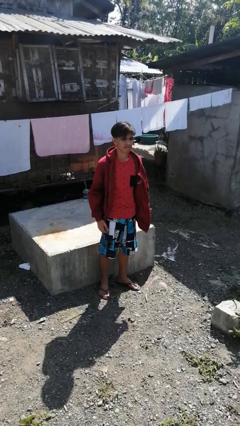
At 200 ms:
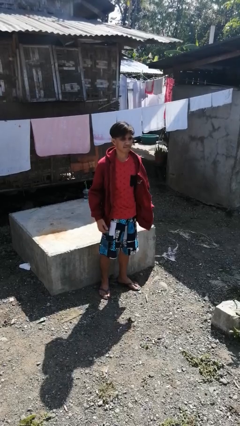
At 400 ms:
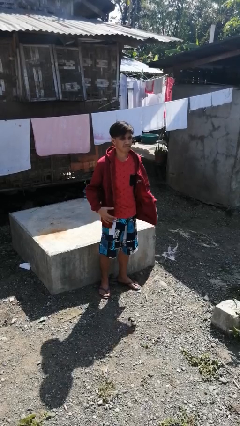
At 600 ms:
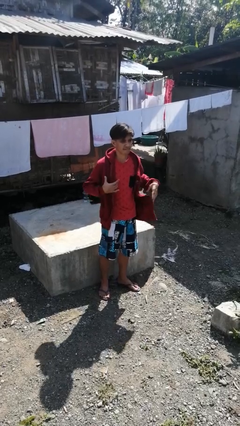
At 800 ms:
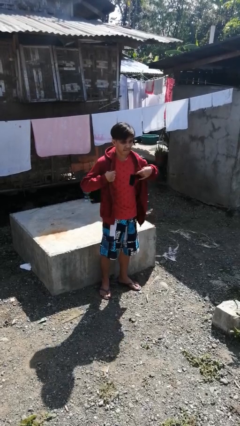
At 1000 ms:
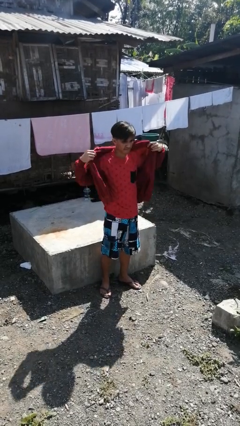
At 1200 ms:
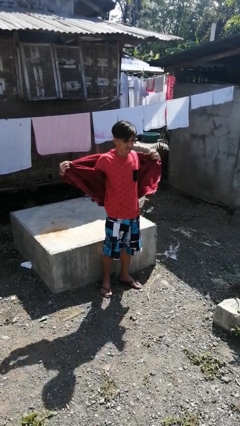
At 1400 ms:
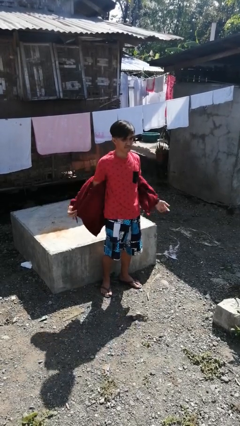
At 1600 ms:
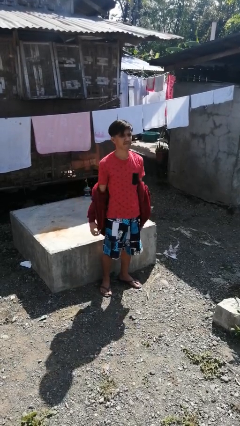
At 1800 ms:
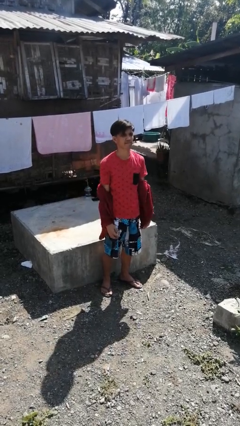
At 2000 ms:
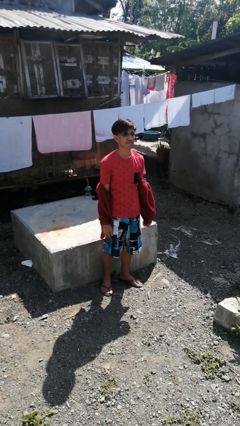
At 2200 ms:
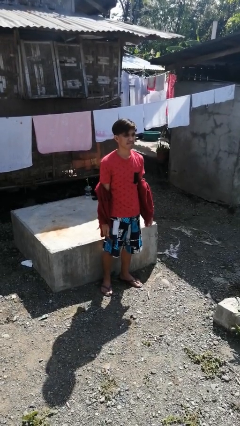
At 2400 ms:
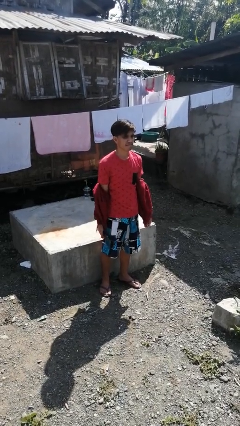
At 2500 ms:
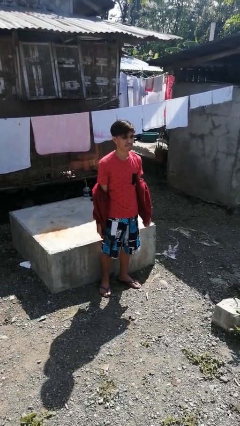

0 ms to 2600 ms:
person takes off jacket

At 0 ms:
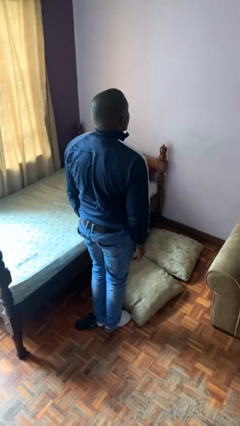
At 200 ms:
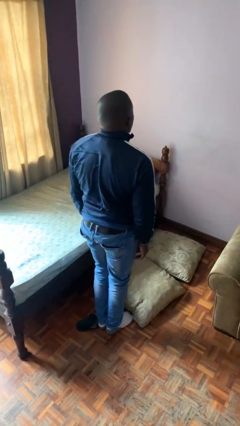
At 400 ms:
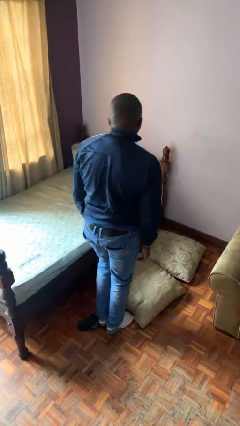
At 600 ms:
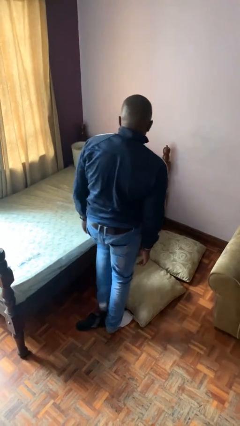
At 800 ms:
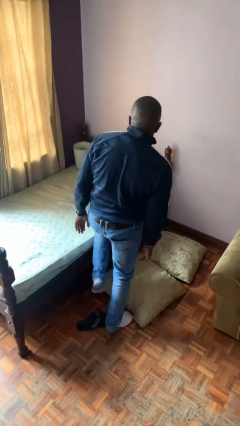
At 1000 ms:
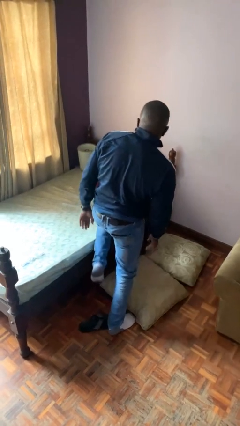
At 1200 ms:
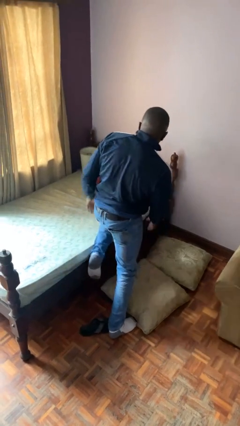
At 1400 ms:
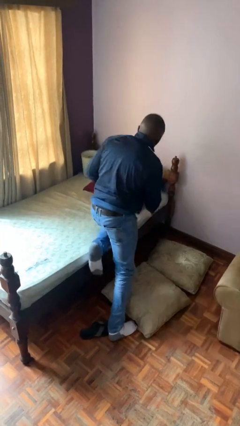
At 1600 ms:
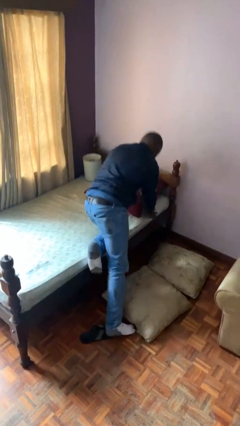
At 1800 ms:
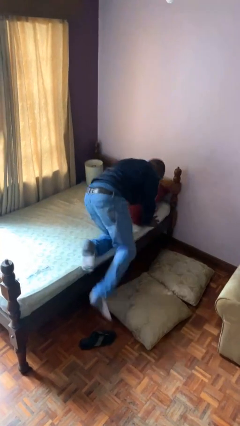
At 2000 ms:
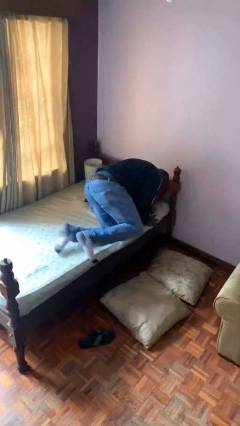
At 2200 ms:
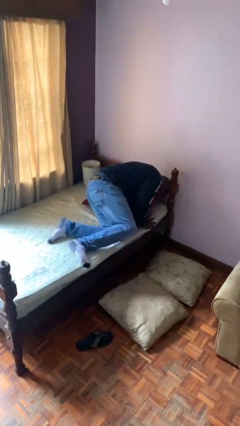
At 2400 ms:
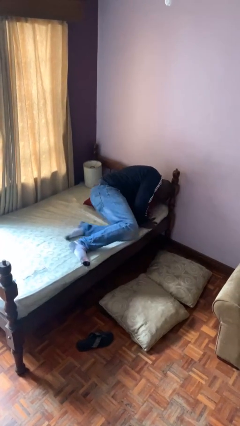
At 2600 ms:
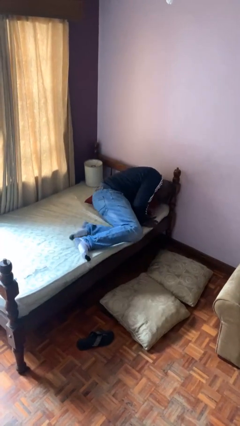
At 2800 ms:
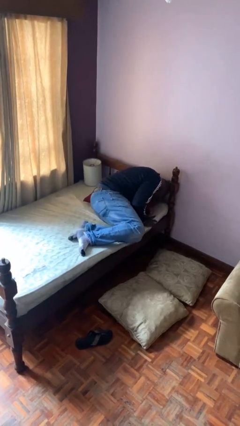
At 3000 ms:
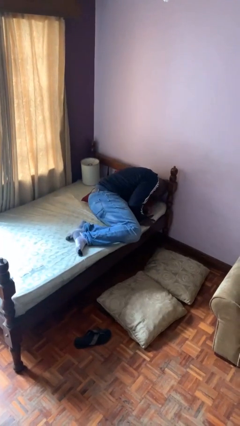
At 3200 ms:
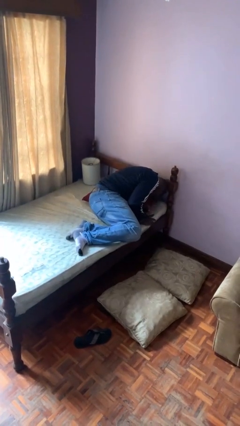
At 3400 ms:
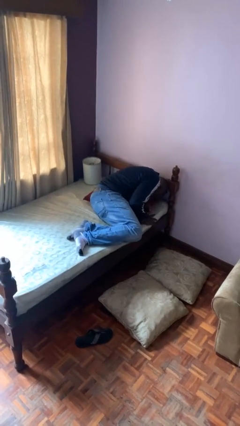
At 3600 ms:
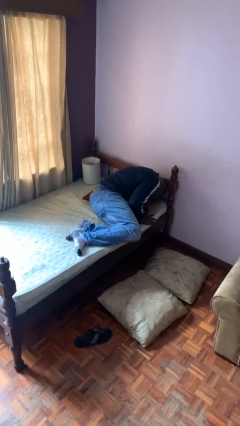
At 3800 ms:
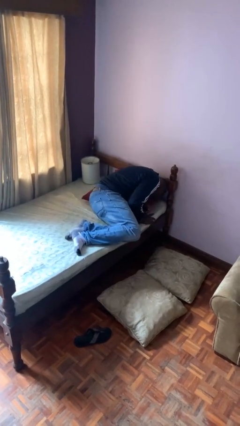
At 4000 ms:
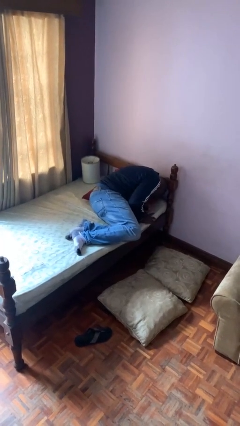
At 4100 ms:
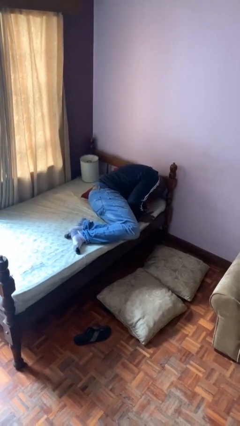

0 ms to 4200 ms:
person lies down on bed

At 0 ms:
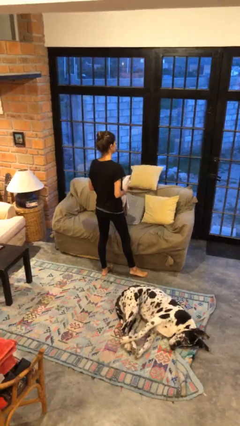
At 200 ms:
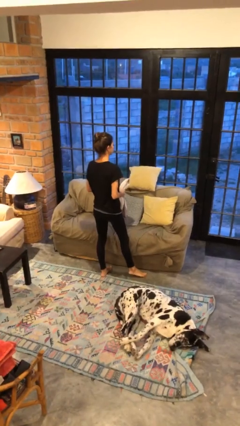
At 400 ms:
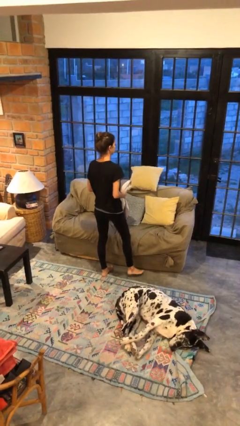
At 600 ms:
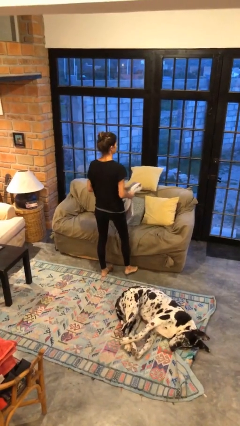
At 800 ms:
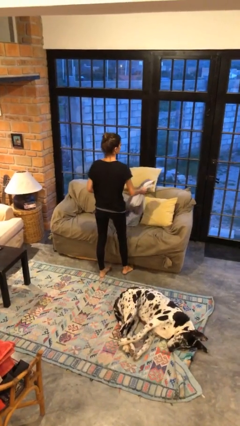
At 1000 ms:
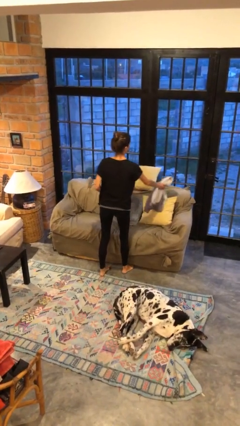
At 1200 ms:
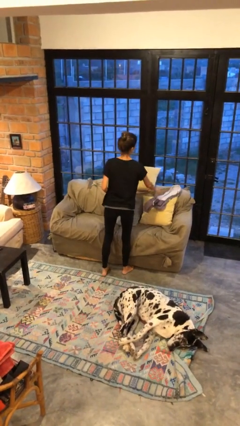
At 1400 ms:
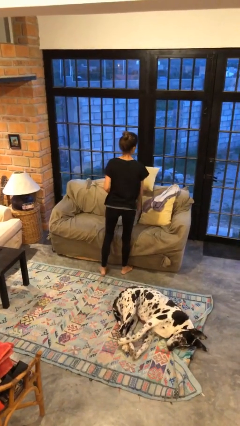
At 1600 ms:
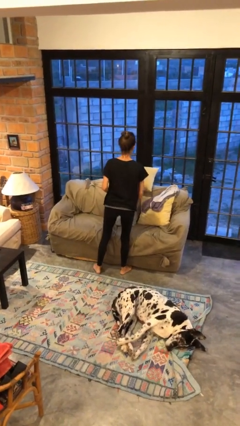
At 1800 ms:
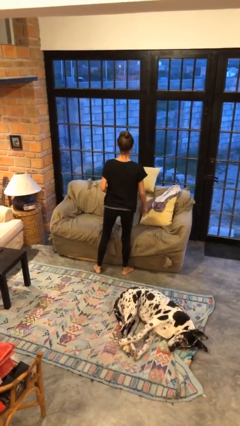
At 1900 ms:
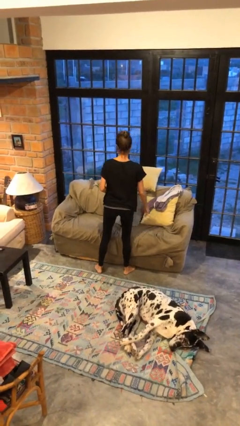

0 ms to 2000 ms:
person puts down object on couch

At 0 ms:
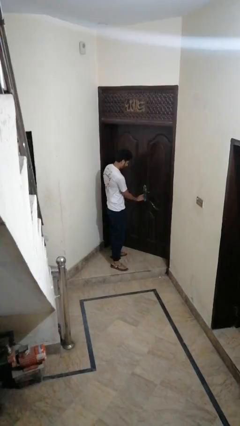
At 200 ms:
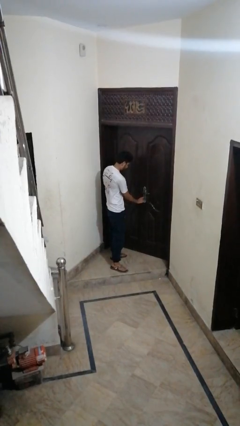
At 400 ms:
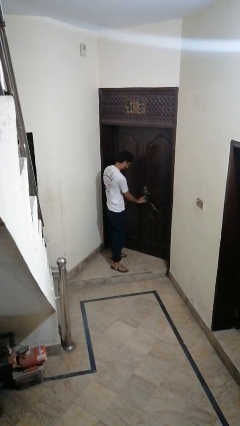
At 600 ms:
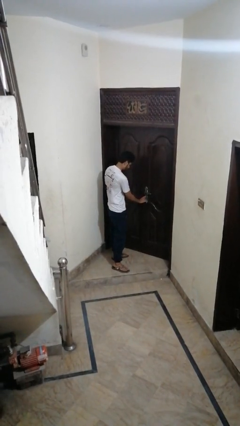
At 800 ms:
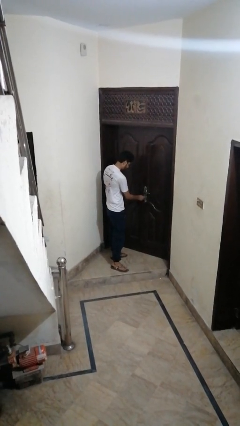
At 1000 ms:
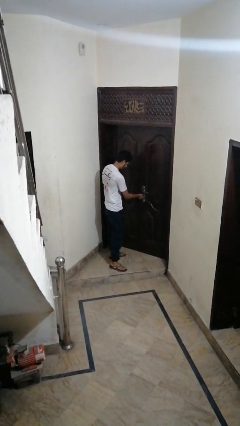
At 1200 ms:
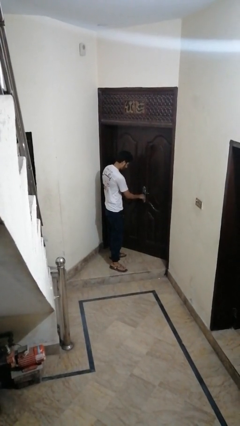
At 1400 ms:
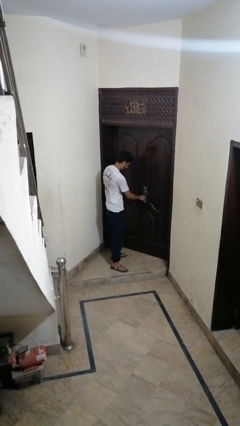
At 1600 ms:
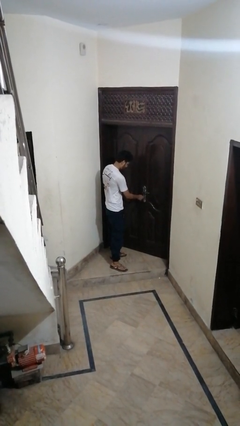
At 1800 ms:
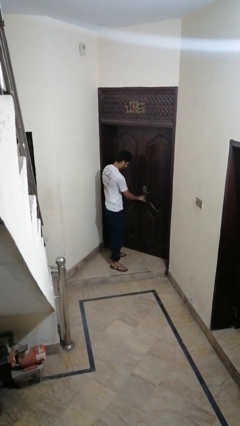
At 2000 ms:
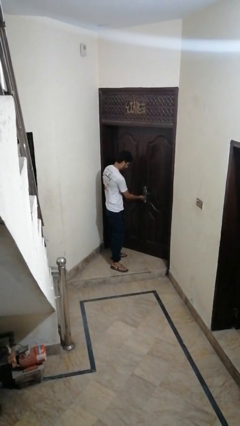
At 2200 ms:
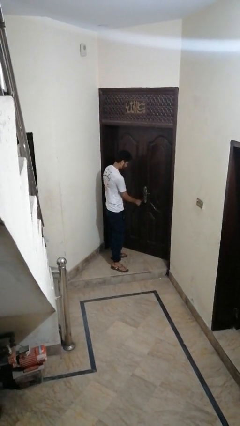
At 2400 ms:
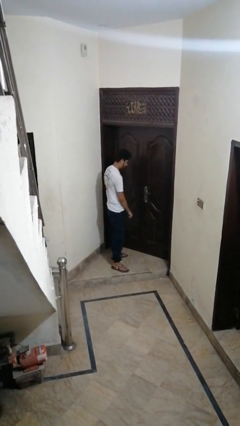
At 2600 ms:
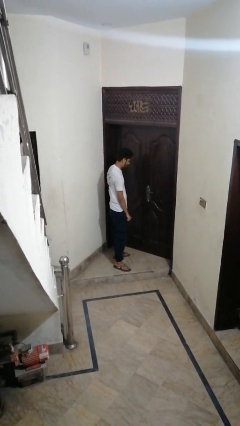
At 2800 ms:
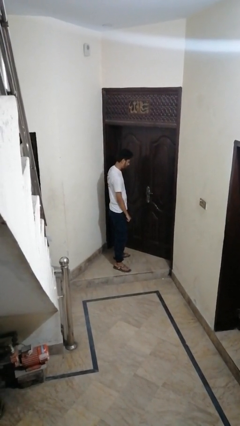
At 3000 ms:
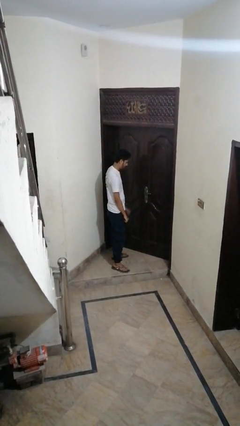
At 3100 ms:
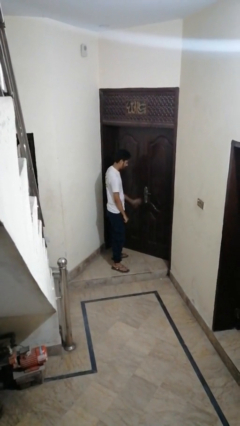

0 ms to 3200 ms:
person unlocks door with keys

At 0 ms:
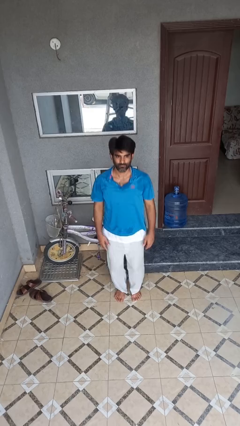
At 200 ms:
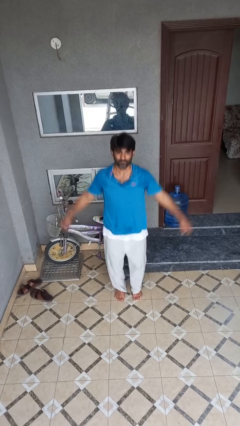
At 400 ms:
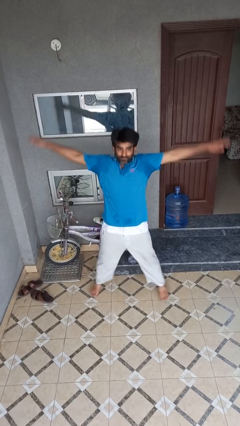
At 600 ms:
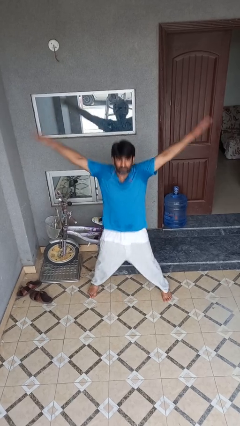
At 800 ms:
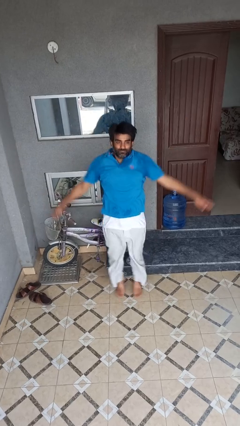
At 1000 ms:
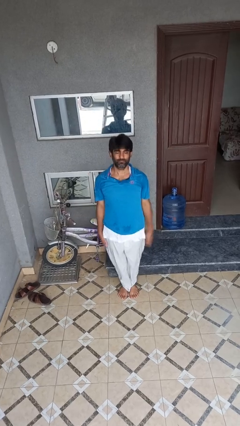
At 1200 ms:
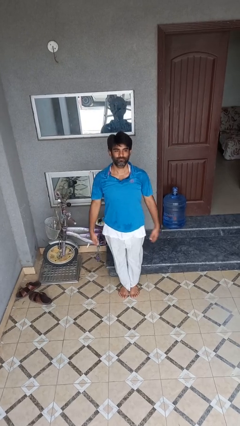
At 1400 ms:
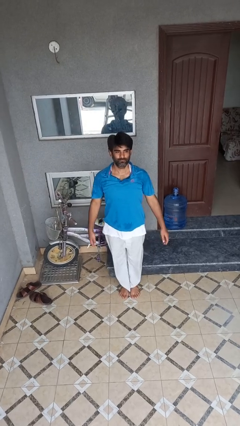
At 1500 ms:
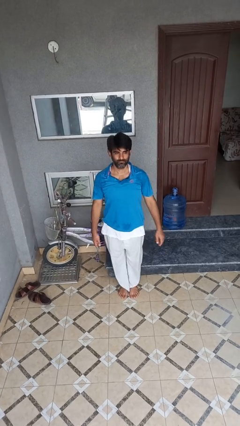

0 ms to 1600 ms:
person exercises with jumping jacks

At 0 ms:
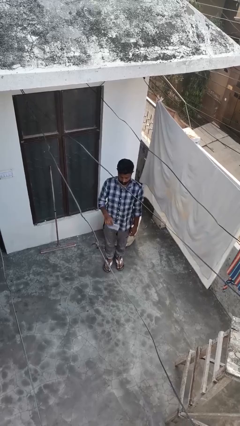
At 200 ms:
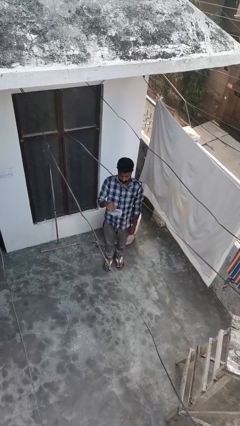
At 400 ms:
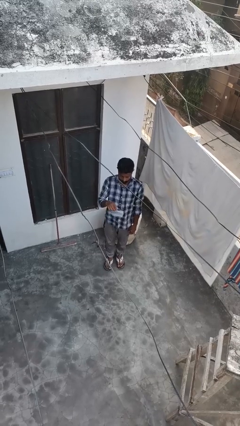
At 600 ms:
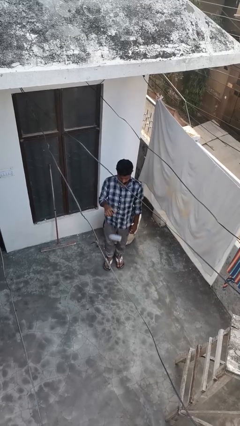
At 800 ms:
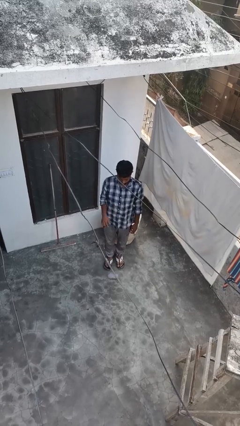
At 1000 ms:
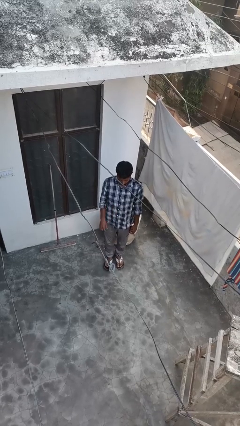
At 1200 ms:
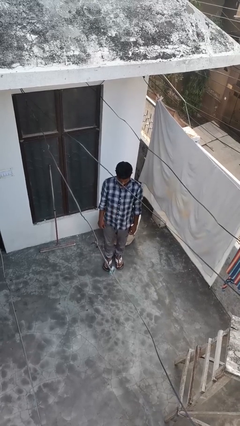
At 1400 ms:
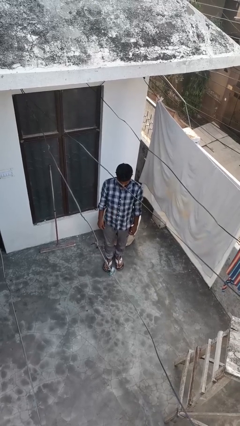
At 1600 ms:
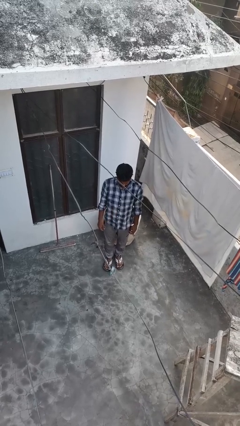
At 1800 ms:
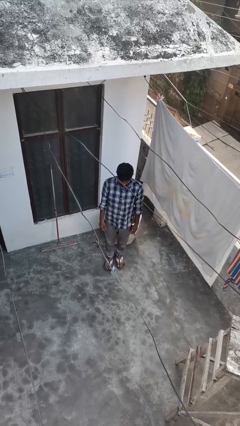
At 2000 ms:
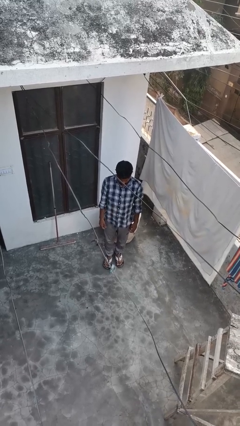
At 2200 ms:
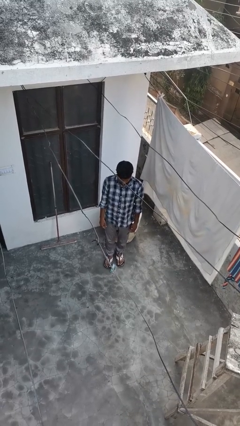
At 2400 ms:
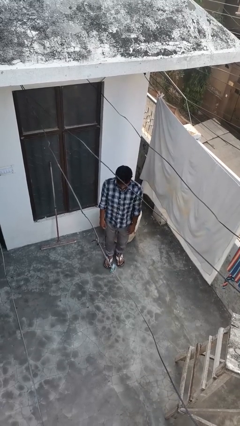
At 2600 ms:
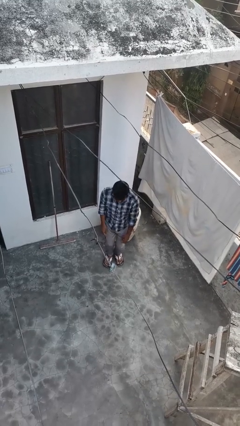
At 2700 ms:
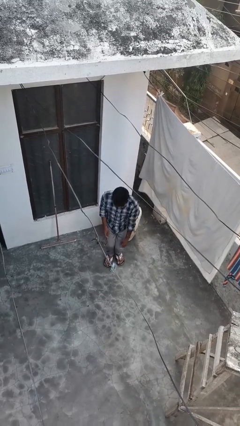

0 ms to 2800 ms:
person throws object into air

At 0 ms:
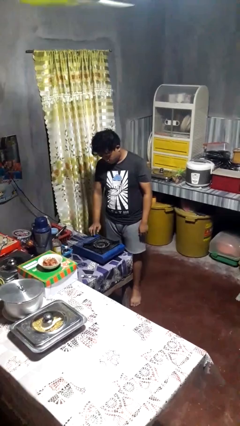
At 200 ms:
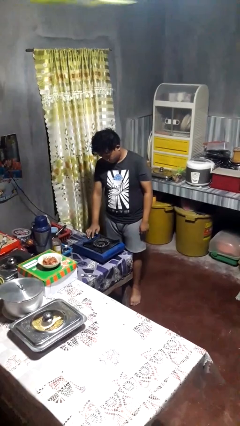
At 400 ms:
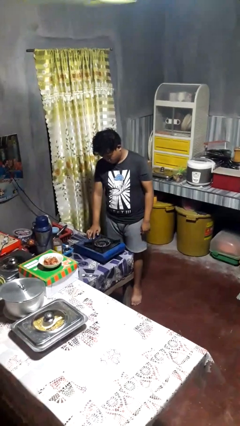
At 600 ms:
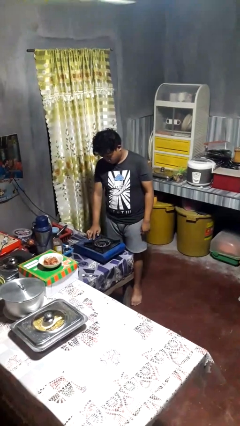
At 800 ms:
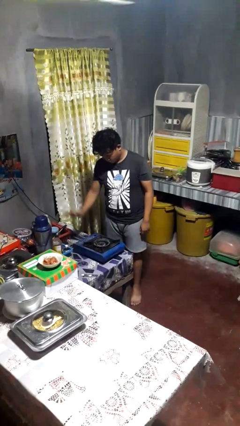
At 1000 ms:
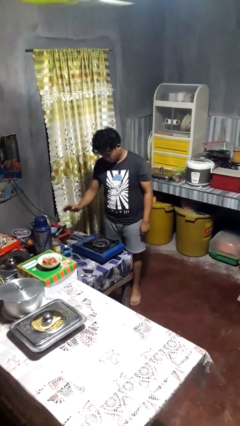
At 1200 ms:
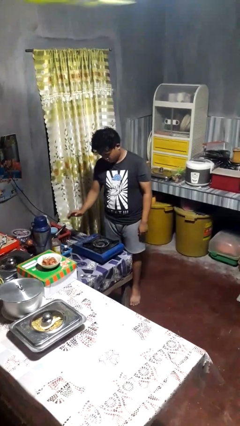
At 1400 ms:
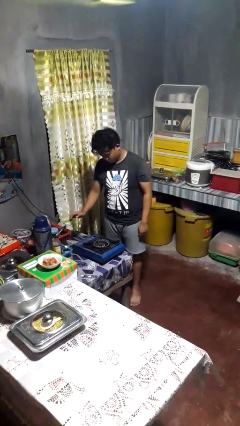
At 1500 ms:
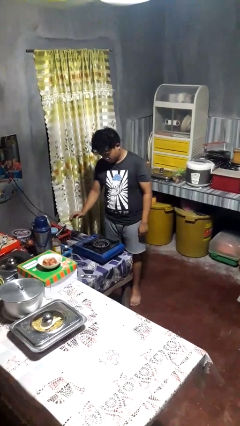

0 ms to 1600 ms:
person burns hand
